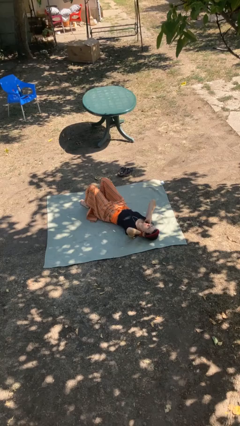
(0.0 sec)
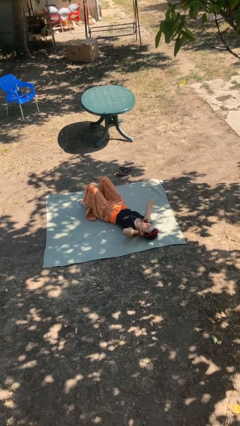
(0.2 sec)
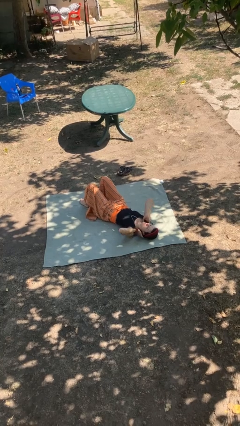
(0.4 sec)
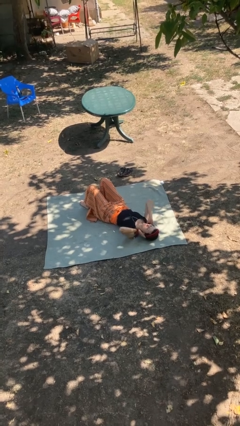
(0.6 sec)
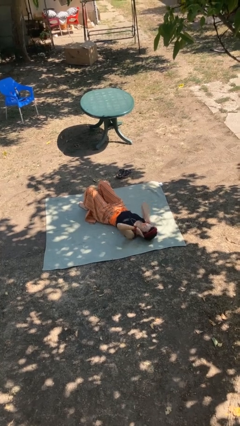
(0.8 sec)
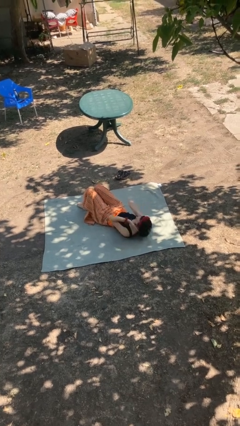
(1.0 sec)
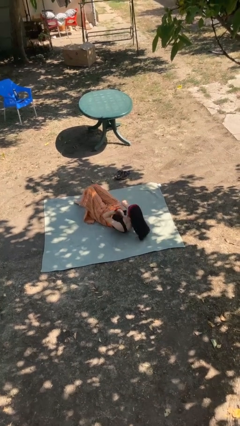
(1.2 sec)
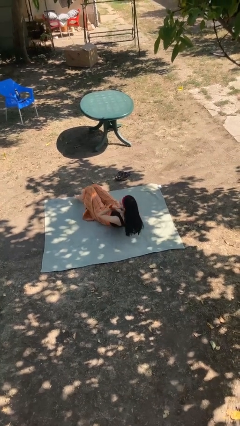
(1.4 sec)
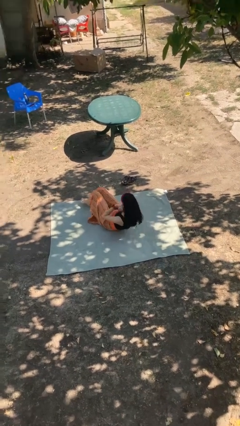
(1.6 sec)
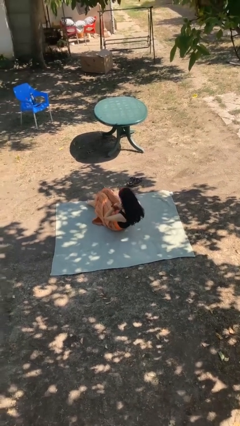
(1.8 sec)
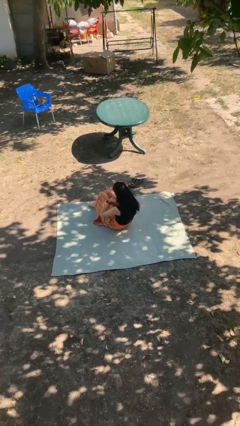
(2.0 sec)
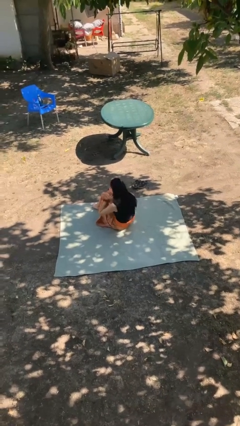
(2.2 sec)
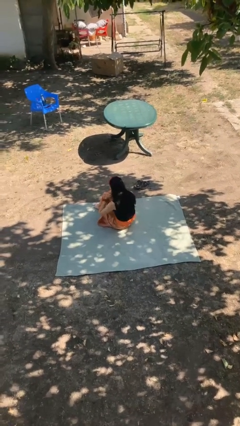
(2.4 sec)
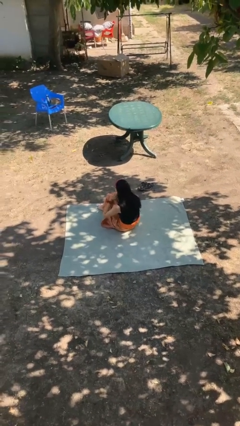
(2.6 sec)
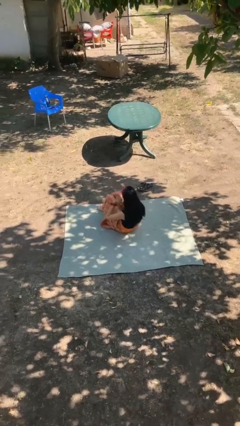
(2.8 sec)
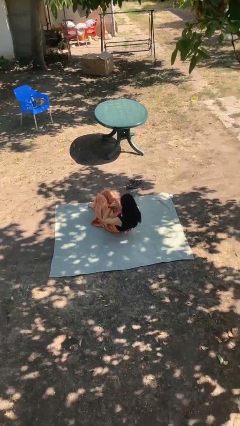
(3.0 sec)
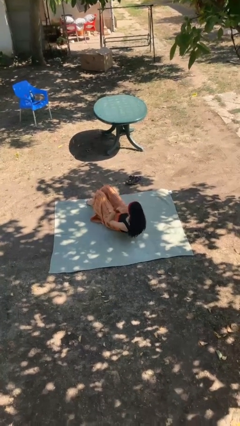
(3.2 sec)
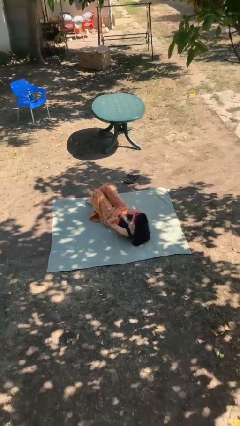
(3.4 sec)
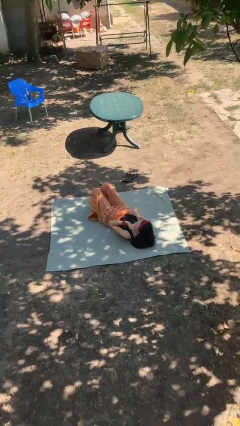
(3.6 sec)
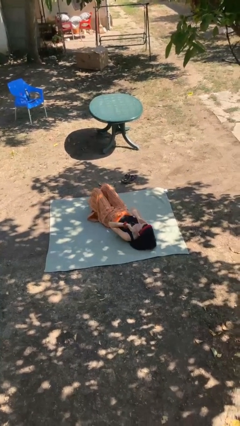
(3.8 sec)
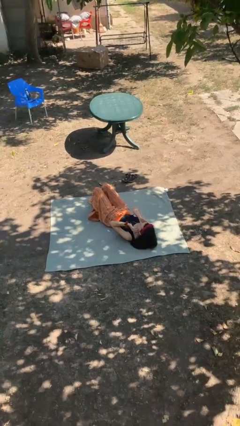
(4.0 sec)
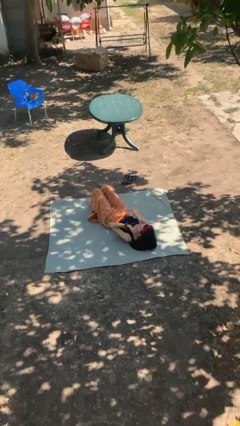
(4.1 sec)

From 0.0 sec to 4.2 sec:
person exercises with situp

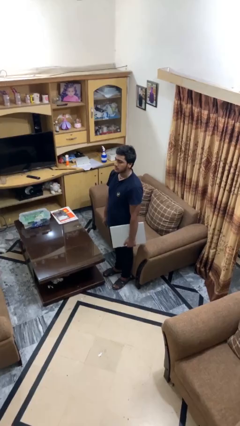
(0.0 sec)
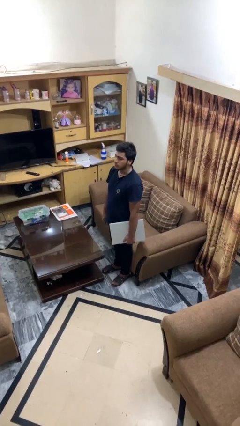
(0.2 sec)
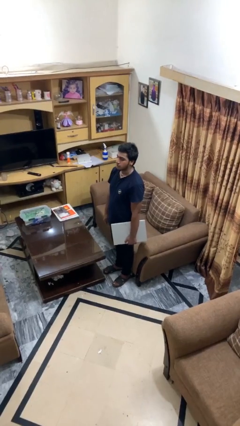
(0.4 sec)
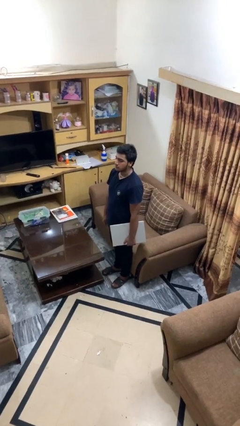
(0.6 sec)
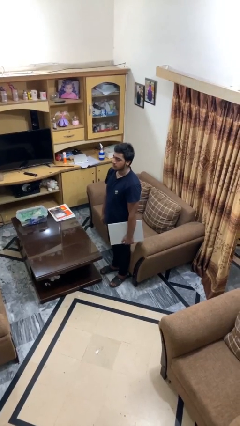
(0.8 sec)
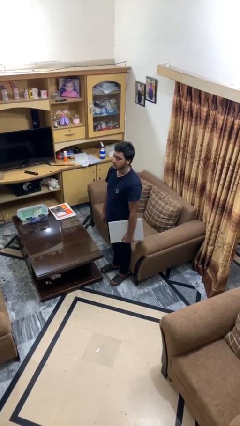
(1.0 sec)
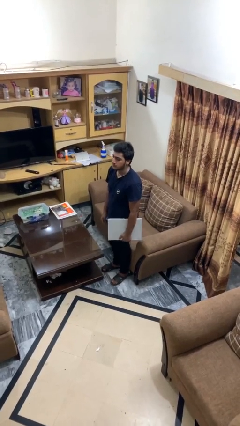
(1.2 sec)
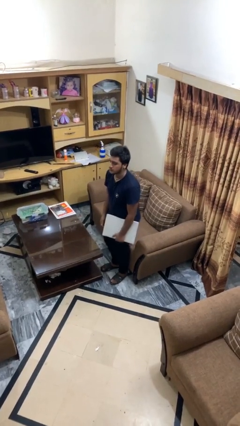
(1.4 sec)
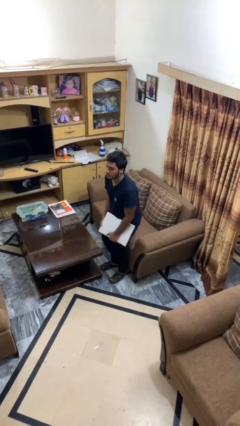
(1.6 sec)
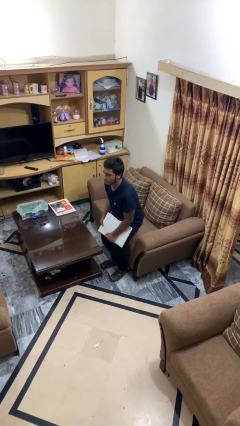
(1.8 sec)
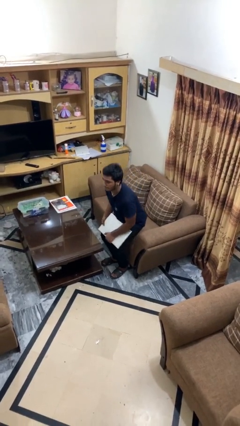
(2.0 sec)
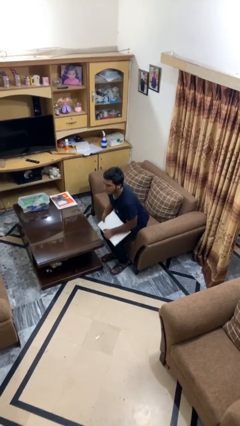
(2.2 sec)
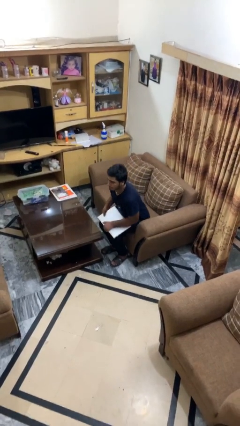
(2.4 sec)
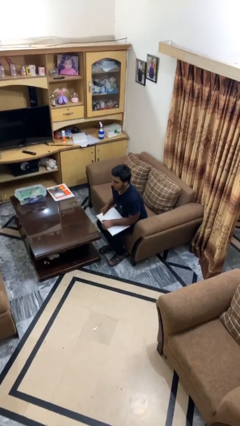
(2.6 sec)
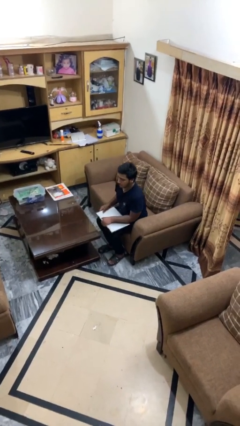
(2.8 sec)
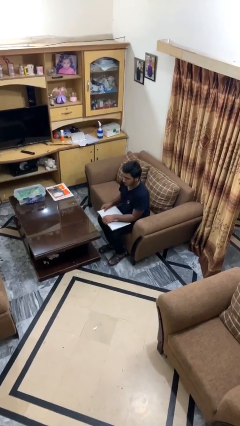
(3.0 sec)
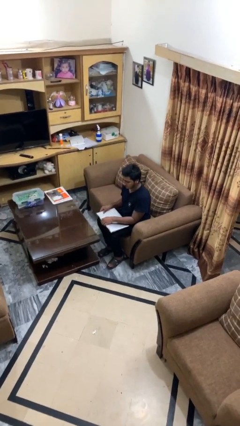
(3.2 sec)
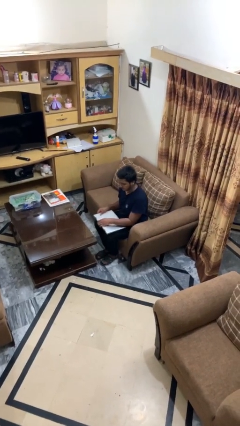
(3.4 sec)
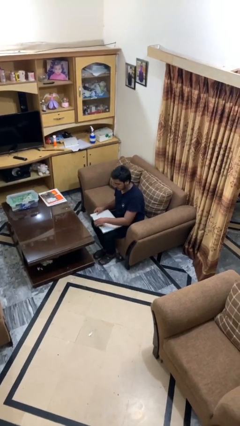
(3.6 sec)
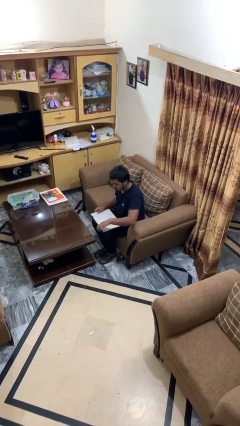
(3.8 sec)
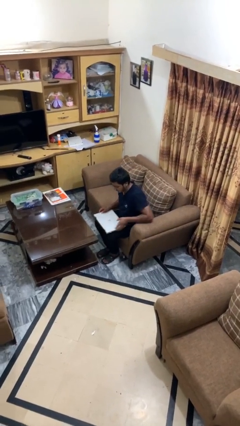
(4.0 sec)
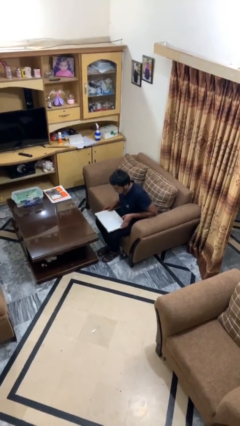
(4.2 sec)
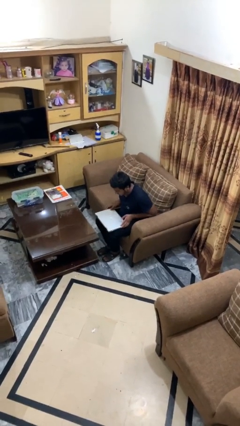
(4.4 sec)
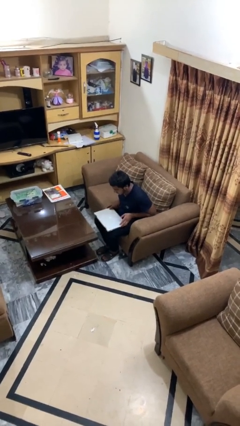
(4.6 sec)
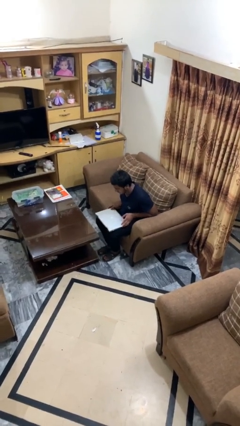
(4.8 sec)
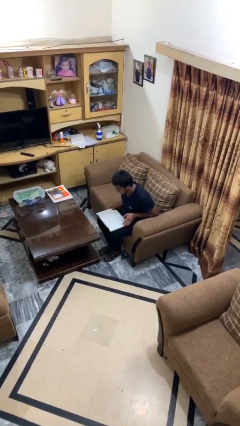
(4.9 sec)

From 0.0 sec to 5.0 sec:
person sits down

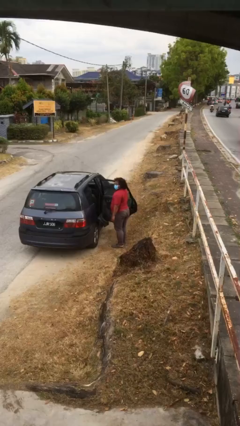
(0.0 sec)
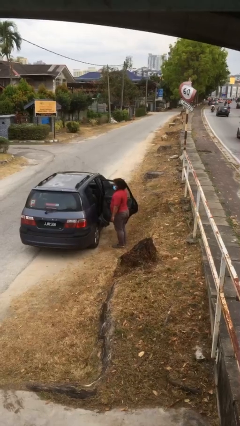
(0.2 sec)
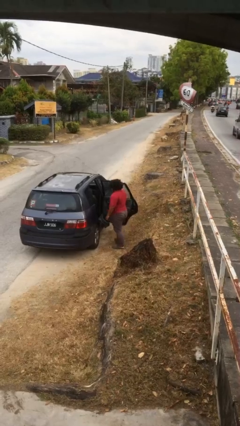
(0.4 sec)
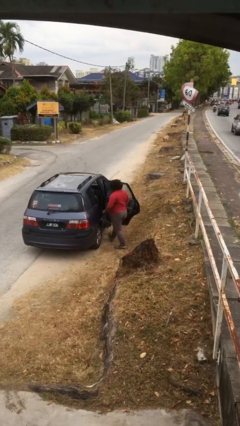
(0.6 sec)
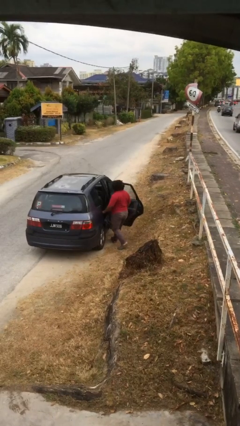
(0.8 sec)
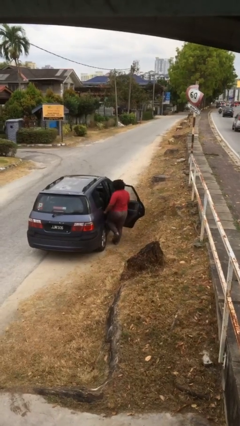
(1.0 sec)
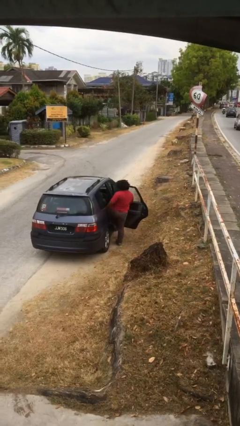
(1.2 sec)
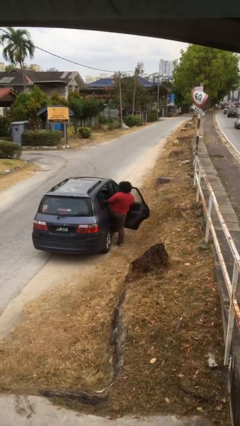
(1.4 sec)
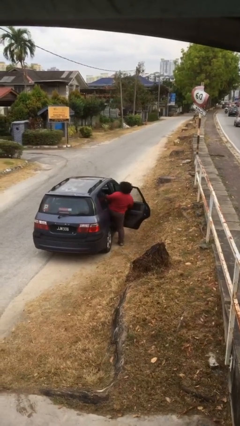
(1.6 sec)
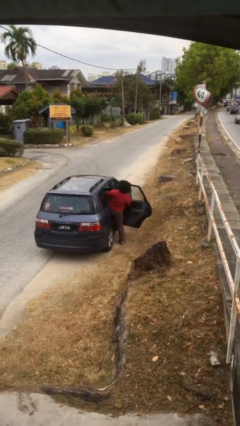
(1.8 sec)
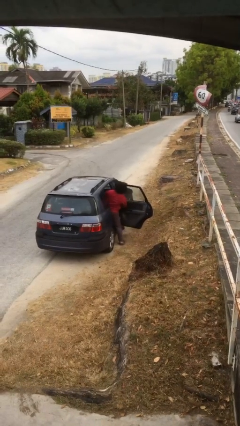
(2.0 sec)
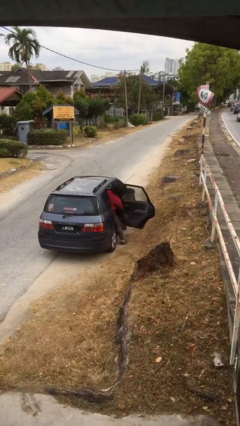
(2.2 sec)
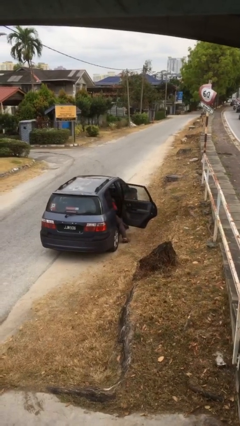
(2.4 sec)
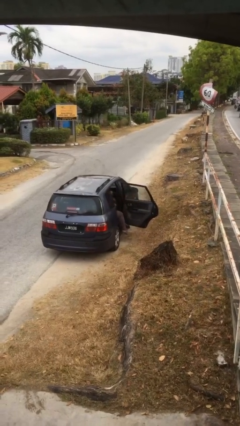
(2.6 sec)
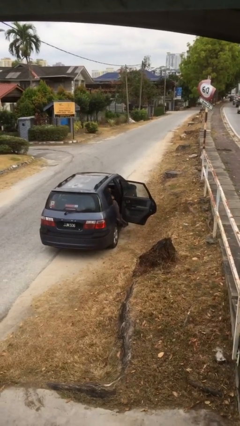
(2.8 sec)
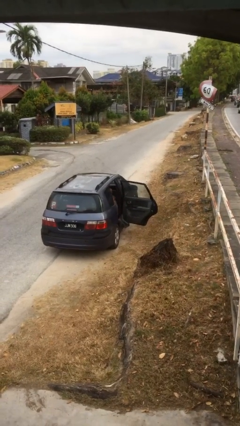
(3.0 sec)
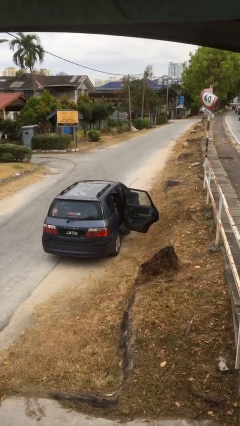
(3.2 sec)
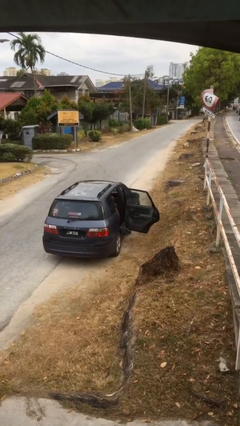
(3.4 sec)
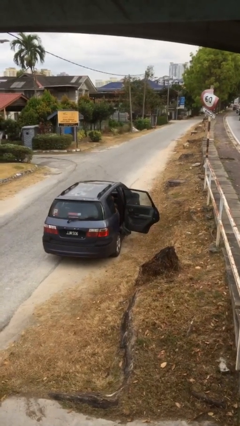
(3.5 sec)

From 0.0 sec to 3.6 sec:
person enters car

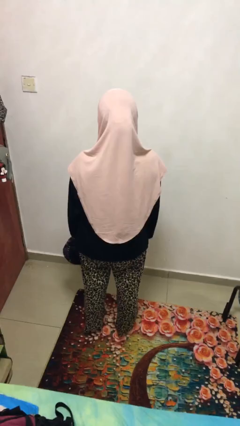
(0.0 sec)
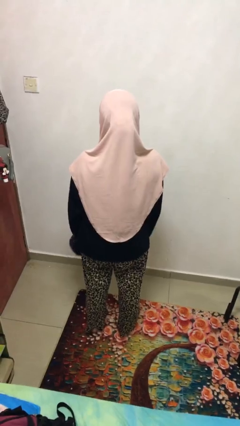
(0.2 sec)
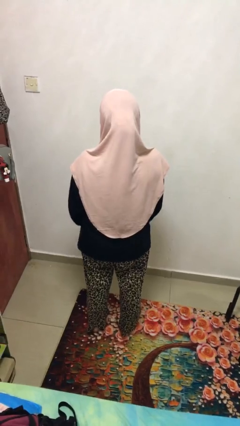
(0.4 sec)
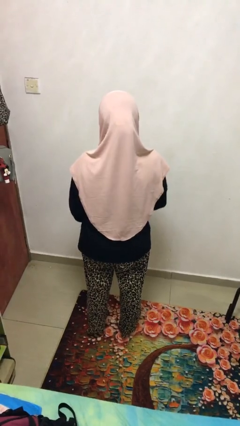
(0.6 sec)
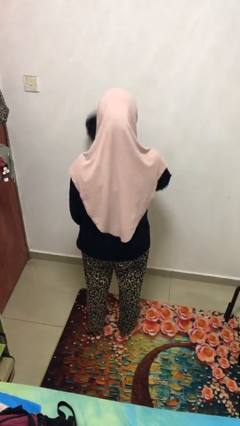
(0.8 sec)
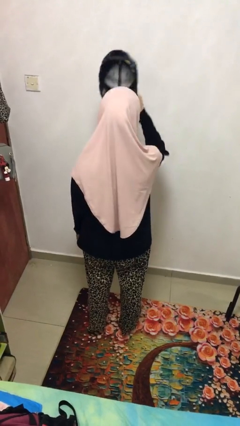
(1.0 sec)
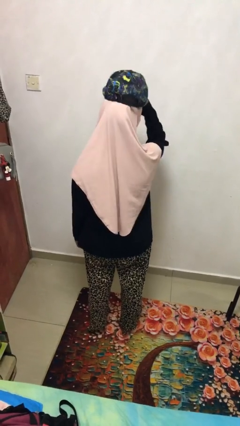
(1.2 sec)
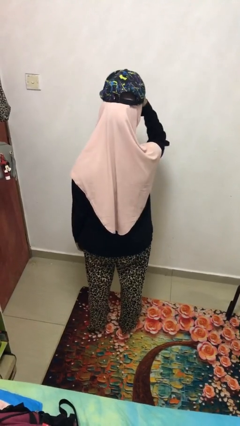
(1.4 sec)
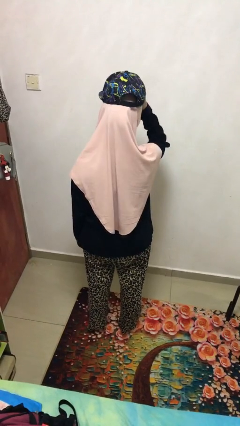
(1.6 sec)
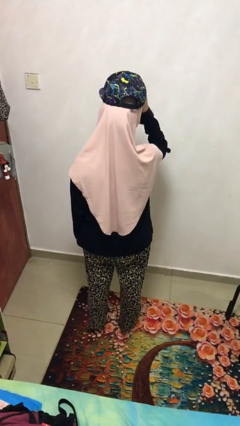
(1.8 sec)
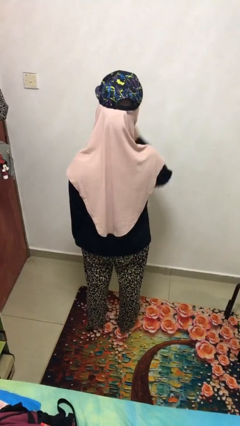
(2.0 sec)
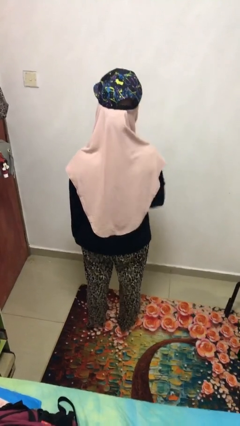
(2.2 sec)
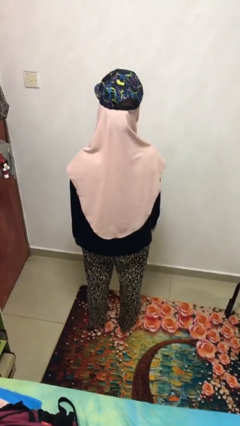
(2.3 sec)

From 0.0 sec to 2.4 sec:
person puts on hat

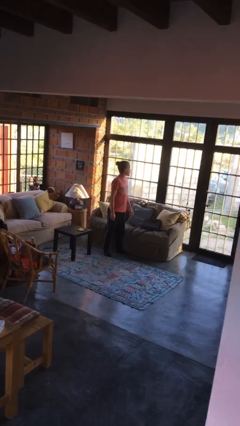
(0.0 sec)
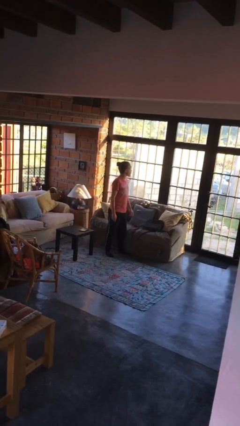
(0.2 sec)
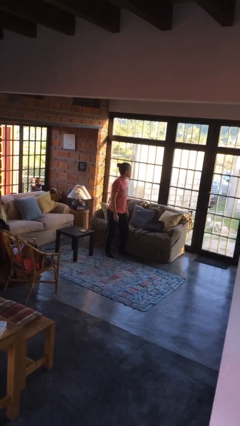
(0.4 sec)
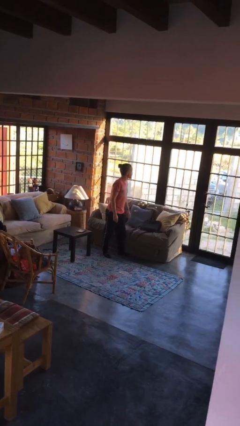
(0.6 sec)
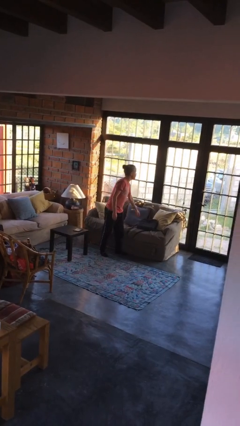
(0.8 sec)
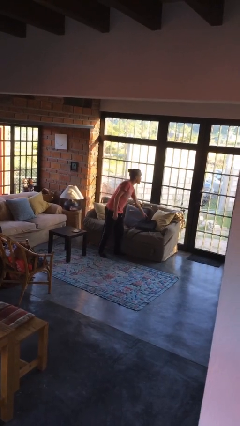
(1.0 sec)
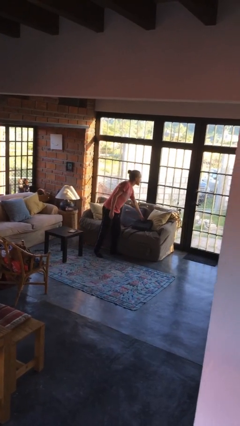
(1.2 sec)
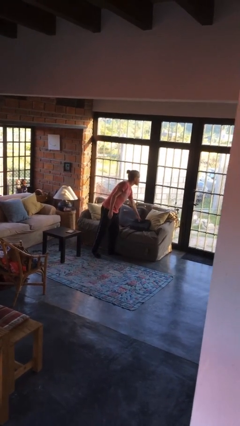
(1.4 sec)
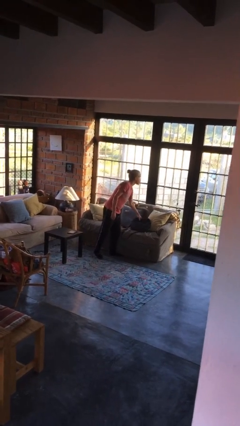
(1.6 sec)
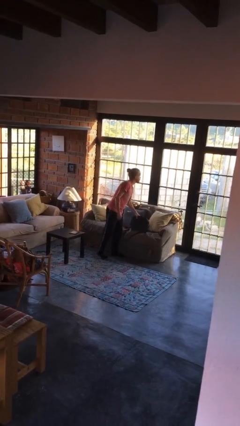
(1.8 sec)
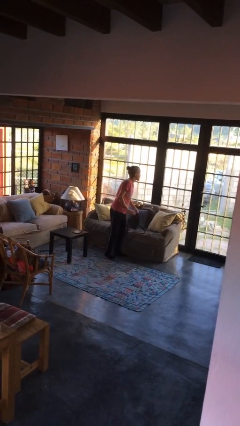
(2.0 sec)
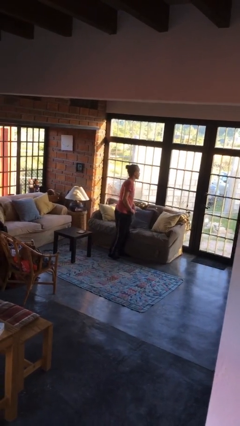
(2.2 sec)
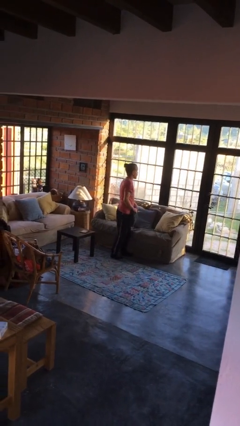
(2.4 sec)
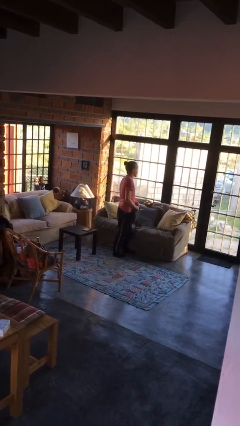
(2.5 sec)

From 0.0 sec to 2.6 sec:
person picks up object from couch
